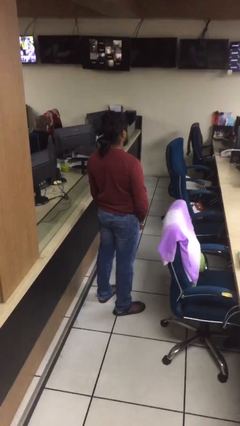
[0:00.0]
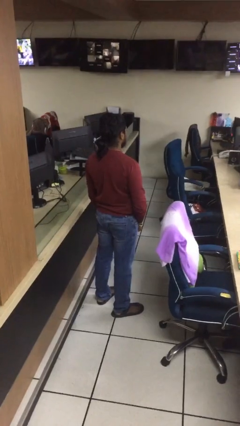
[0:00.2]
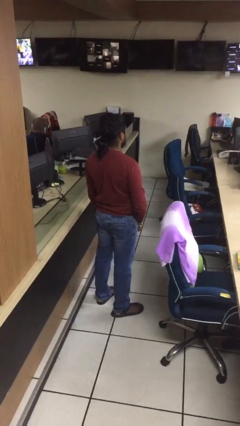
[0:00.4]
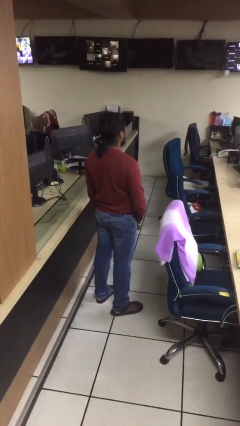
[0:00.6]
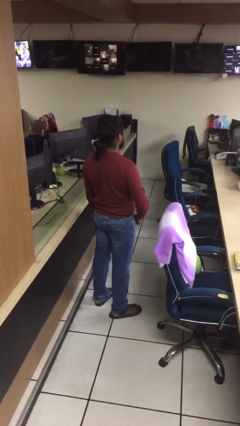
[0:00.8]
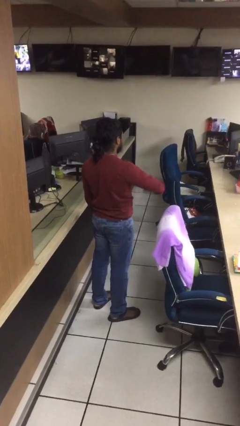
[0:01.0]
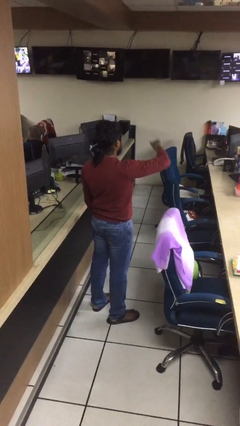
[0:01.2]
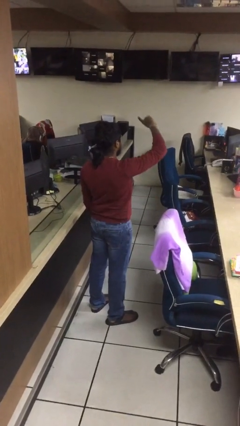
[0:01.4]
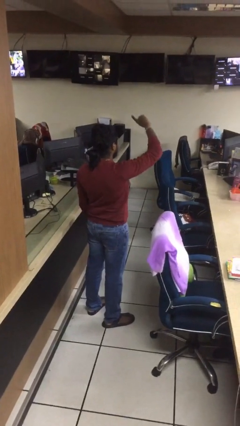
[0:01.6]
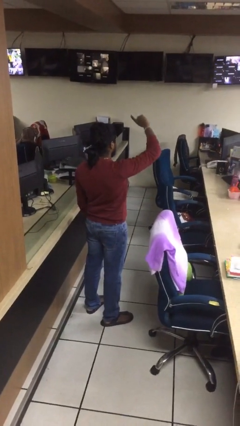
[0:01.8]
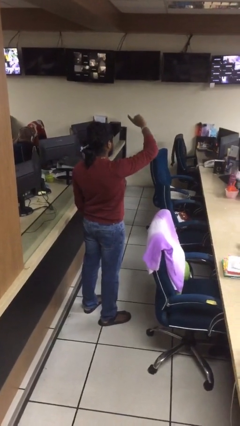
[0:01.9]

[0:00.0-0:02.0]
person gestures swipe up

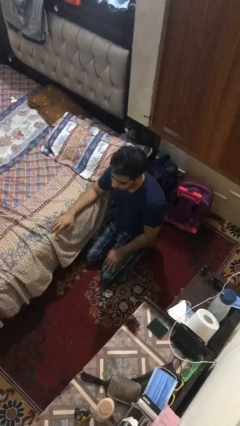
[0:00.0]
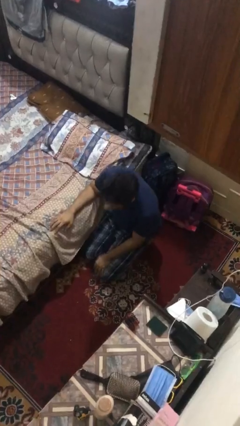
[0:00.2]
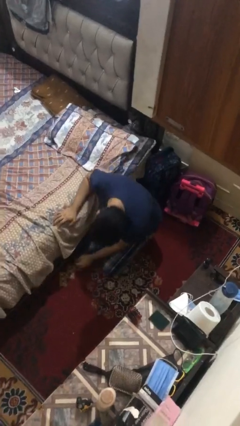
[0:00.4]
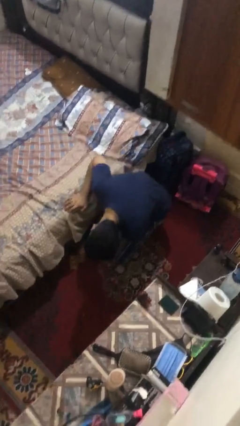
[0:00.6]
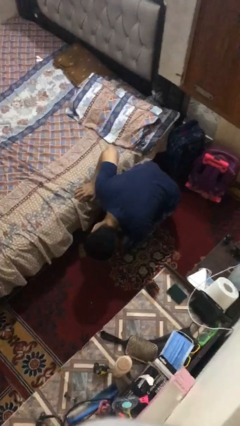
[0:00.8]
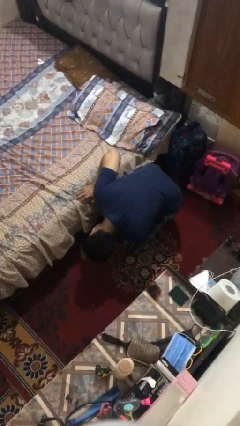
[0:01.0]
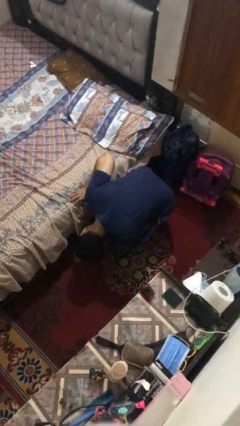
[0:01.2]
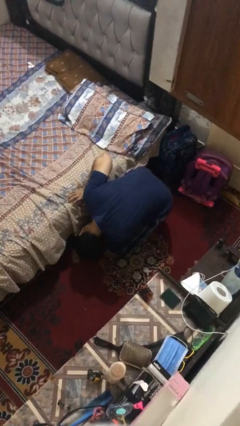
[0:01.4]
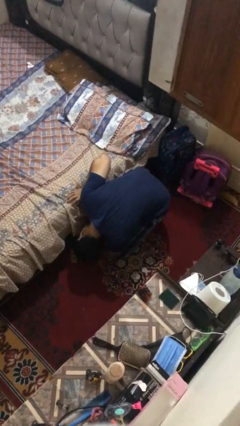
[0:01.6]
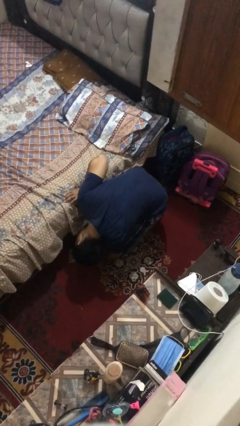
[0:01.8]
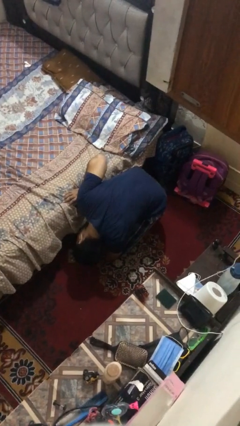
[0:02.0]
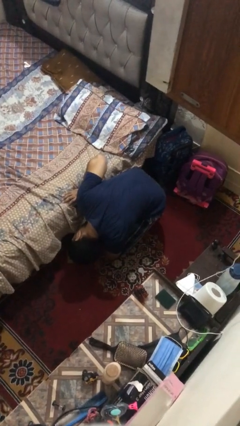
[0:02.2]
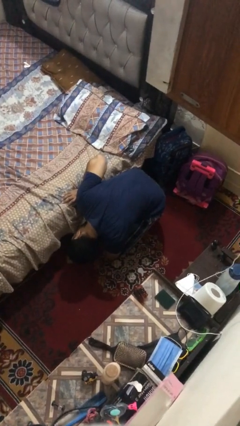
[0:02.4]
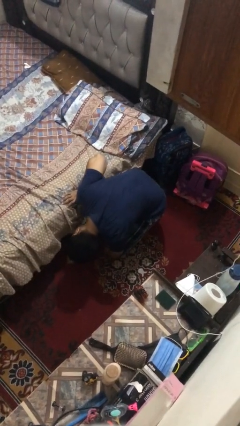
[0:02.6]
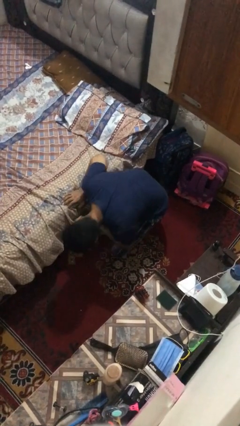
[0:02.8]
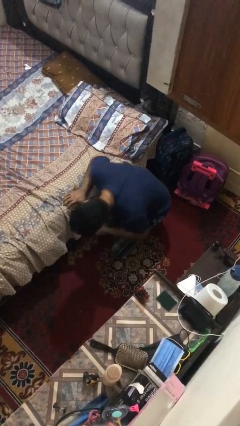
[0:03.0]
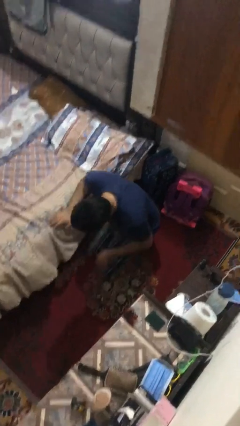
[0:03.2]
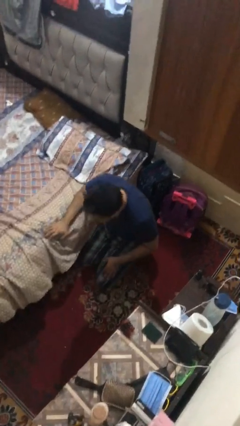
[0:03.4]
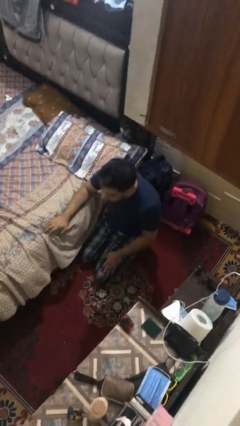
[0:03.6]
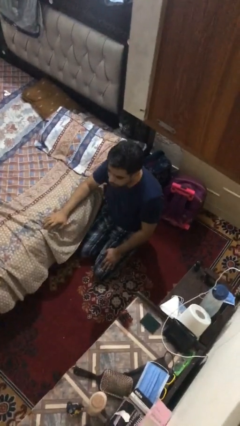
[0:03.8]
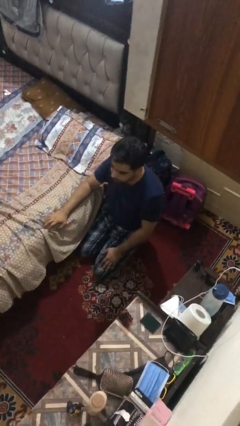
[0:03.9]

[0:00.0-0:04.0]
person searches under bed

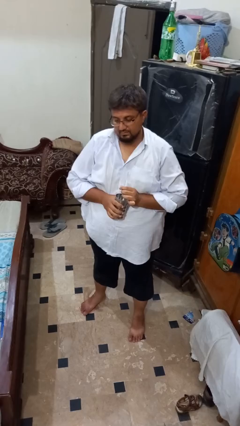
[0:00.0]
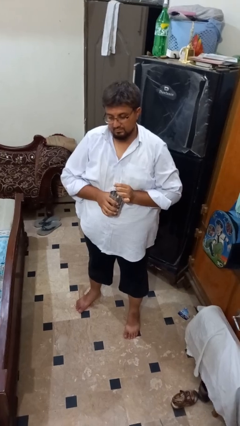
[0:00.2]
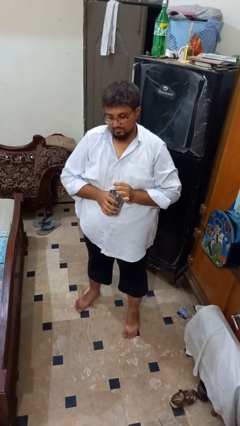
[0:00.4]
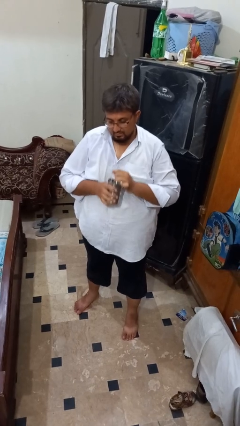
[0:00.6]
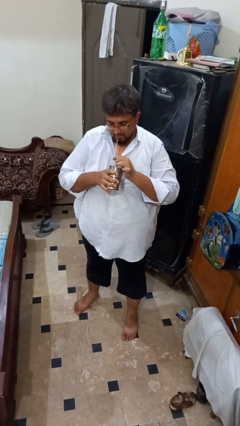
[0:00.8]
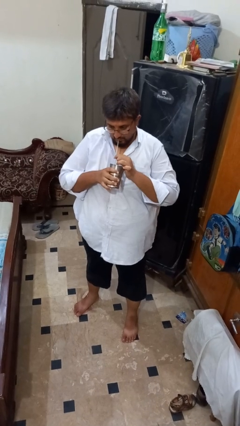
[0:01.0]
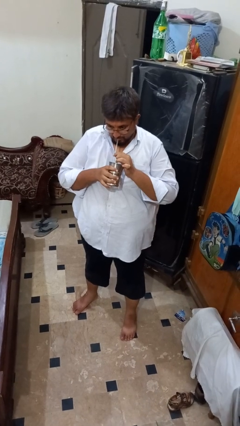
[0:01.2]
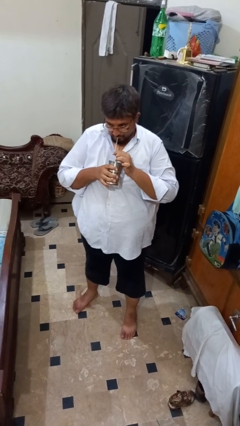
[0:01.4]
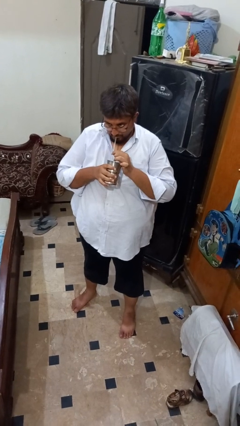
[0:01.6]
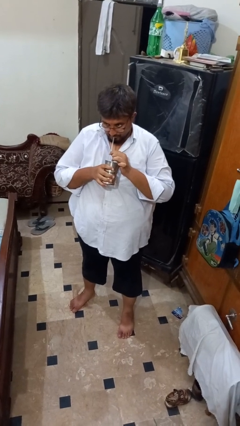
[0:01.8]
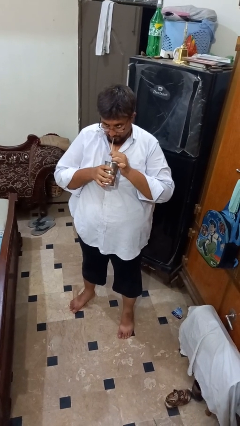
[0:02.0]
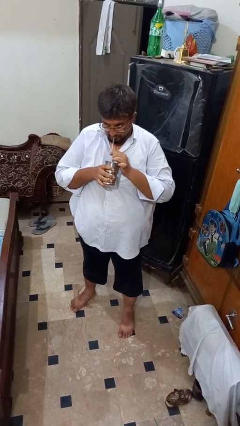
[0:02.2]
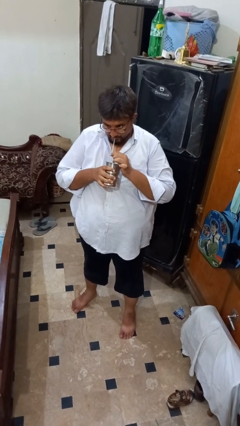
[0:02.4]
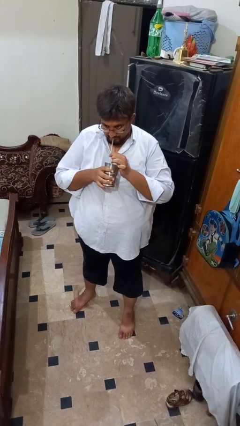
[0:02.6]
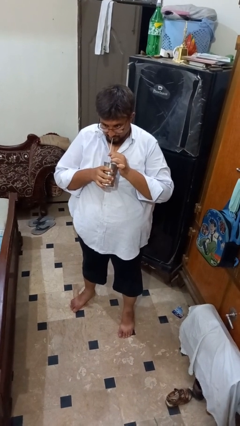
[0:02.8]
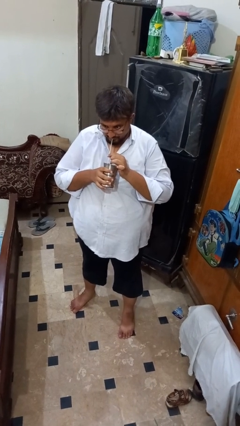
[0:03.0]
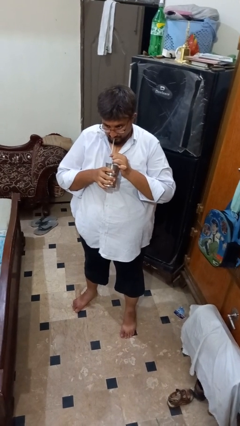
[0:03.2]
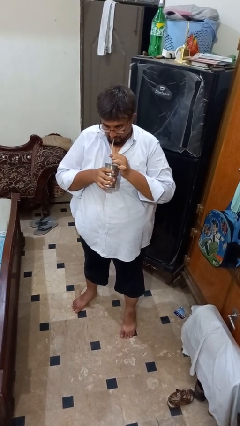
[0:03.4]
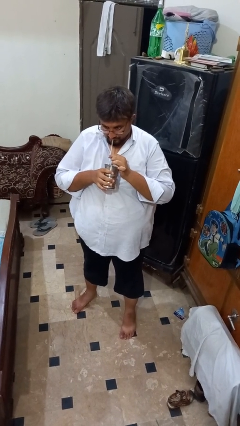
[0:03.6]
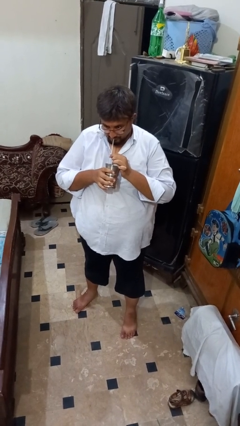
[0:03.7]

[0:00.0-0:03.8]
person drinks from straw

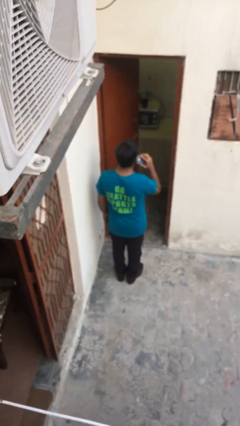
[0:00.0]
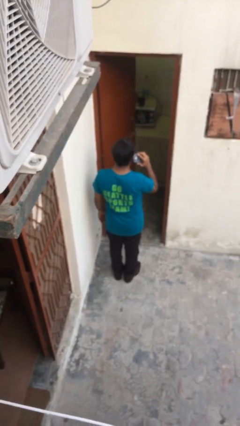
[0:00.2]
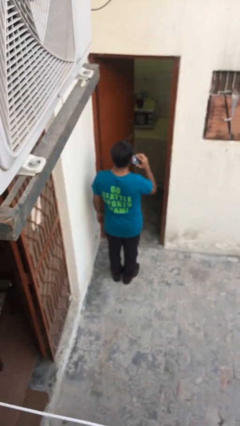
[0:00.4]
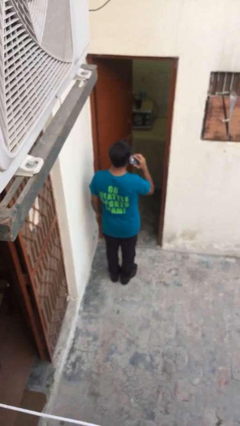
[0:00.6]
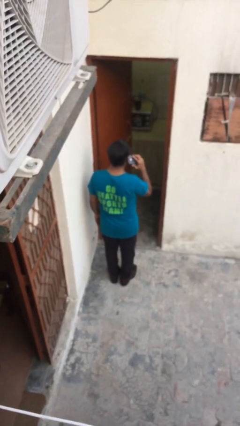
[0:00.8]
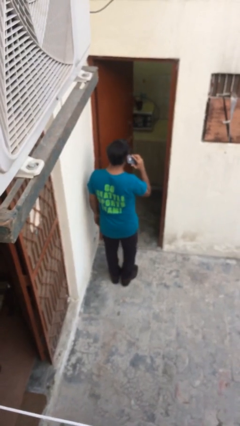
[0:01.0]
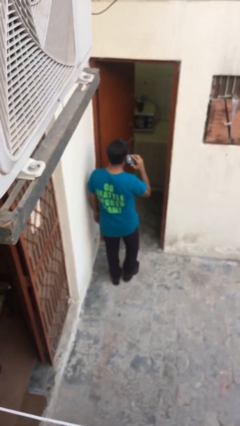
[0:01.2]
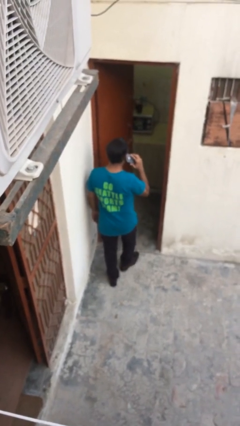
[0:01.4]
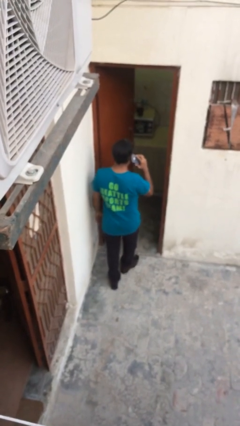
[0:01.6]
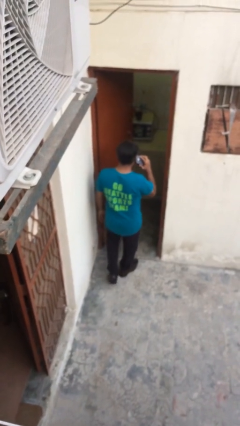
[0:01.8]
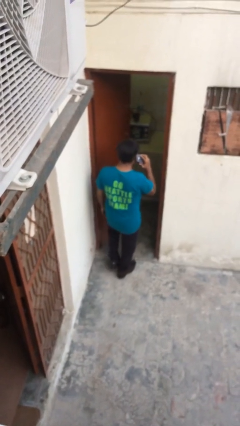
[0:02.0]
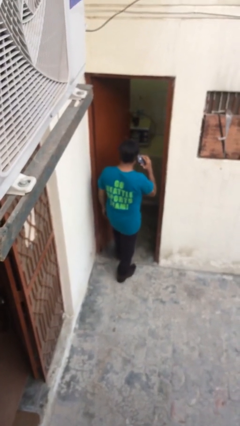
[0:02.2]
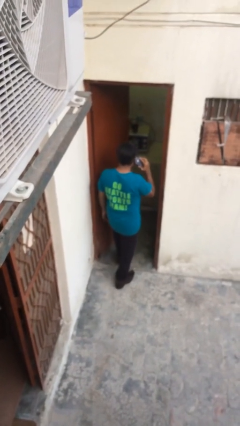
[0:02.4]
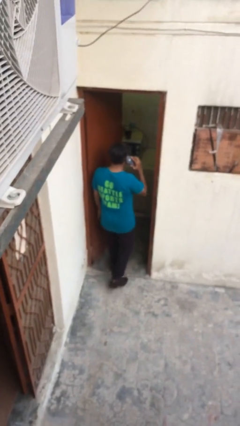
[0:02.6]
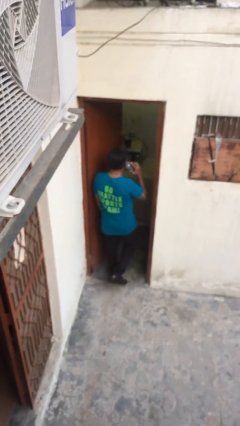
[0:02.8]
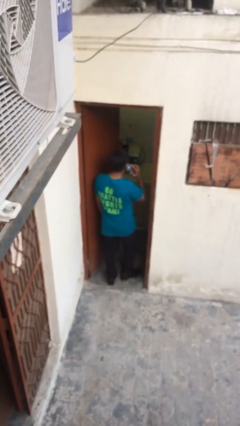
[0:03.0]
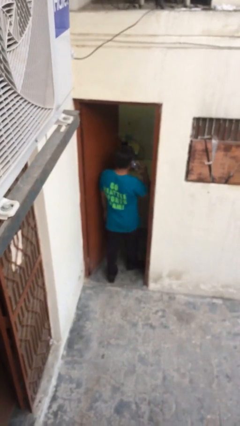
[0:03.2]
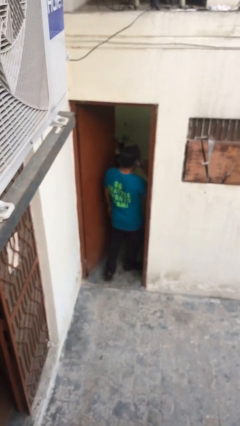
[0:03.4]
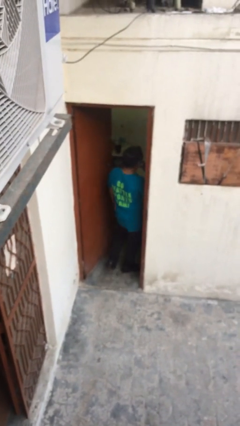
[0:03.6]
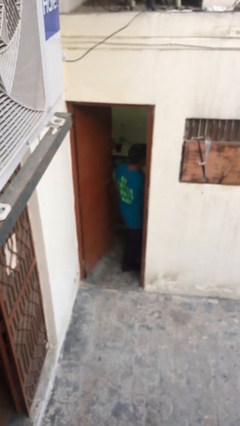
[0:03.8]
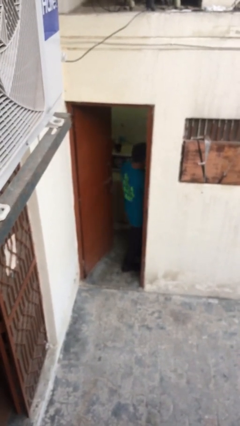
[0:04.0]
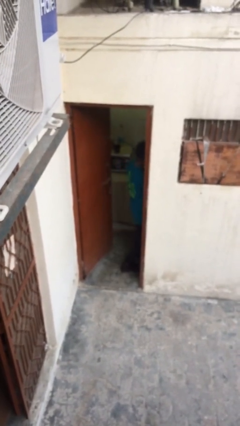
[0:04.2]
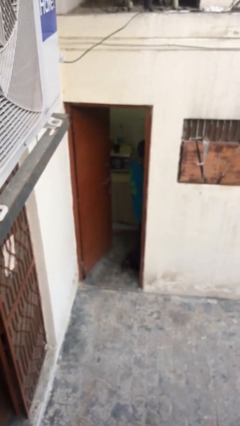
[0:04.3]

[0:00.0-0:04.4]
person exits scene through structure

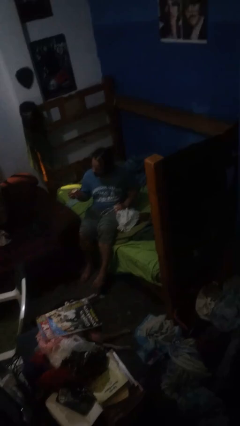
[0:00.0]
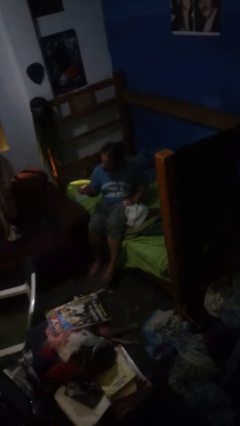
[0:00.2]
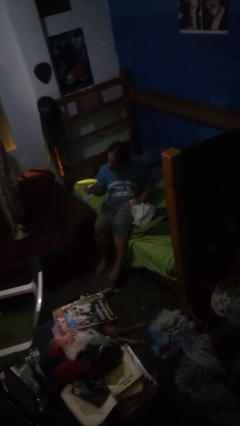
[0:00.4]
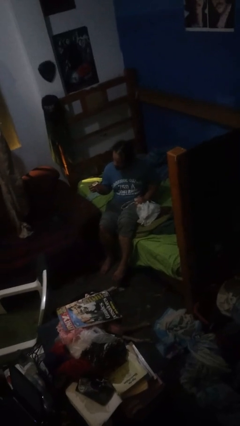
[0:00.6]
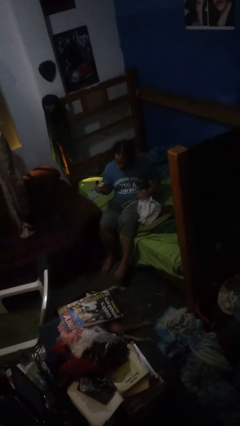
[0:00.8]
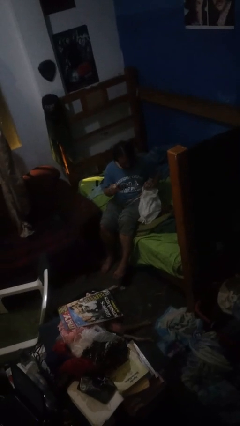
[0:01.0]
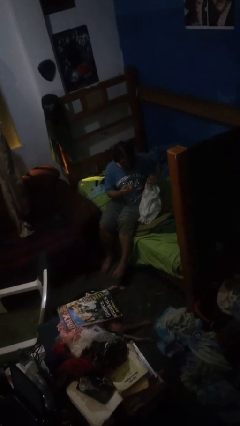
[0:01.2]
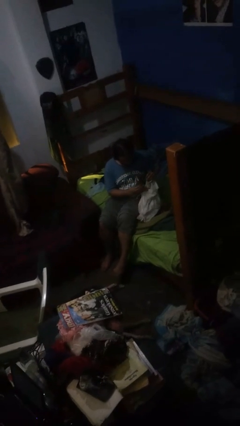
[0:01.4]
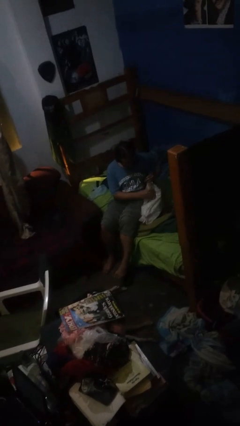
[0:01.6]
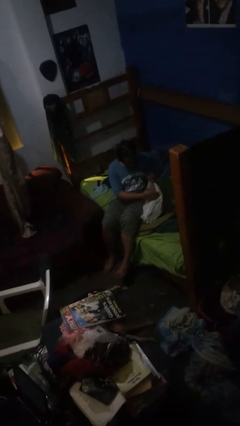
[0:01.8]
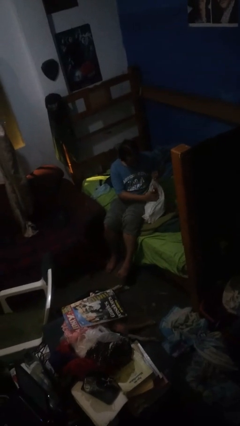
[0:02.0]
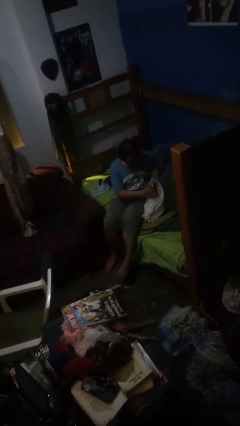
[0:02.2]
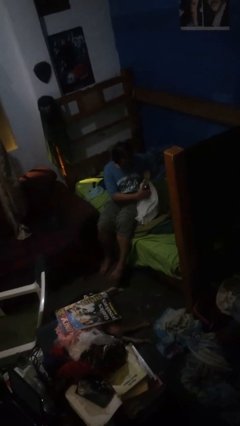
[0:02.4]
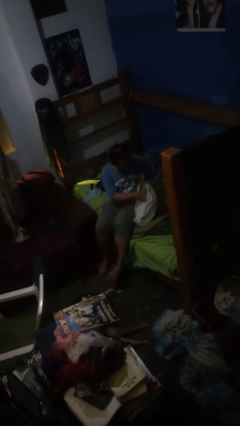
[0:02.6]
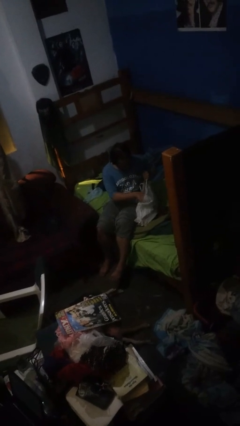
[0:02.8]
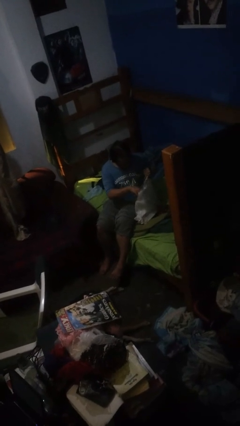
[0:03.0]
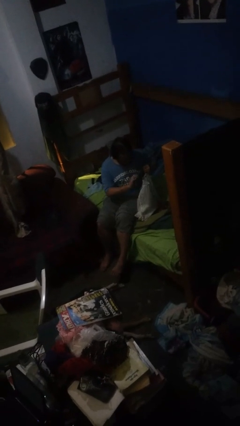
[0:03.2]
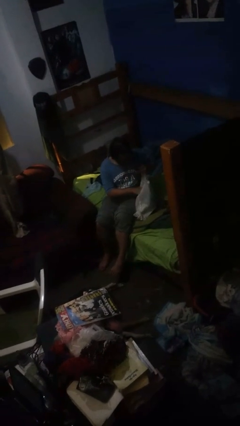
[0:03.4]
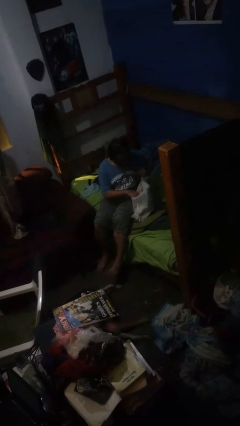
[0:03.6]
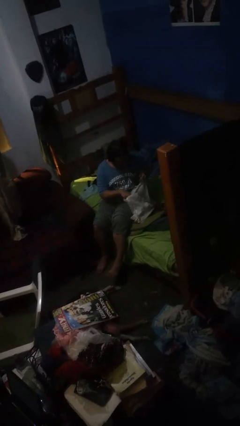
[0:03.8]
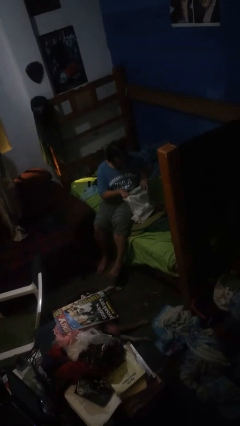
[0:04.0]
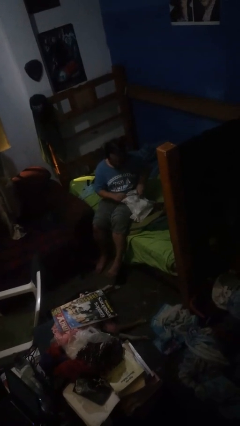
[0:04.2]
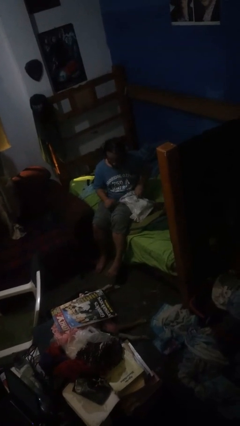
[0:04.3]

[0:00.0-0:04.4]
person puts object into bag
